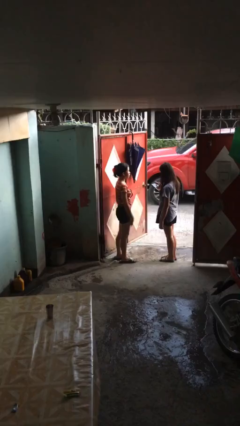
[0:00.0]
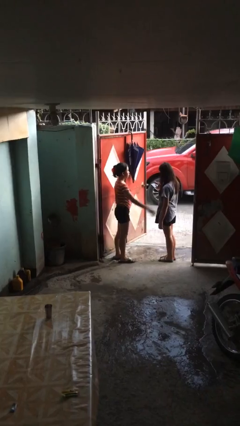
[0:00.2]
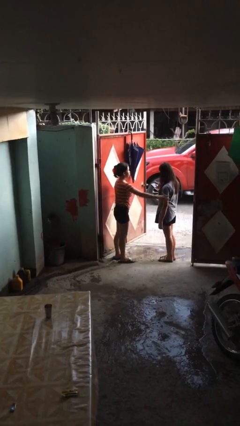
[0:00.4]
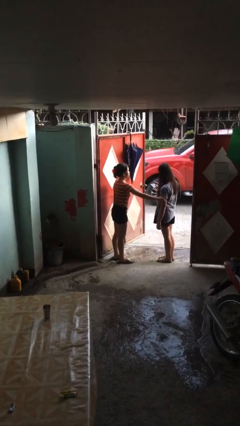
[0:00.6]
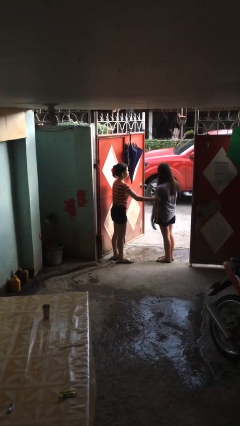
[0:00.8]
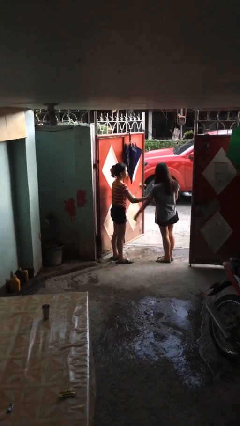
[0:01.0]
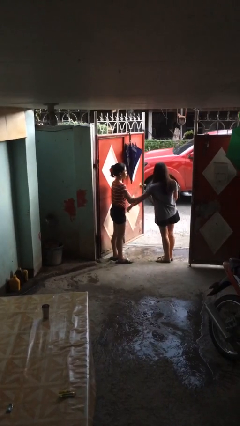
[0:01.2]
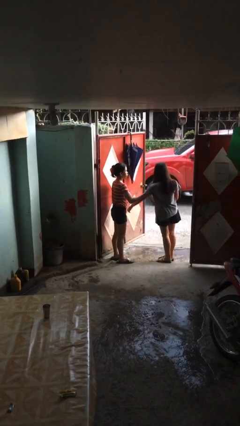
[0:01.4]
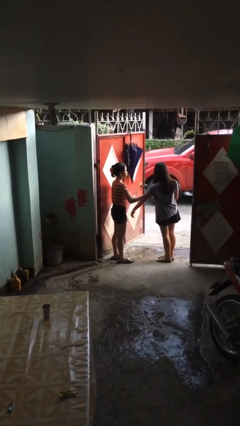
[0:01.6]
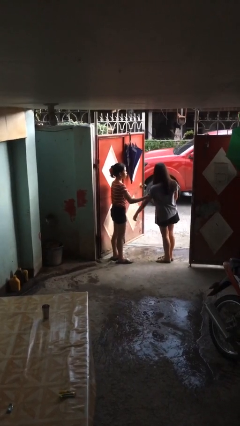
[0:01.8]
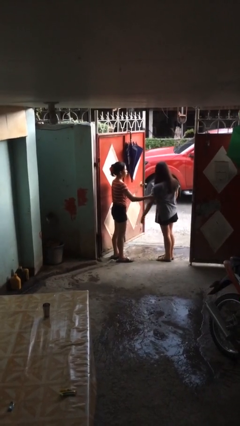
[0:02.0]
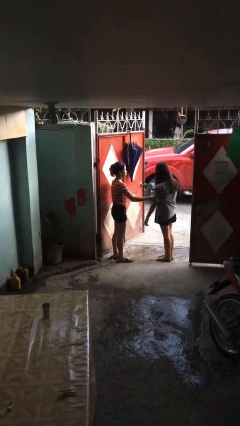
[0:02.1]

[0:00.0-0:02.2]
person grabs person by bicep

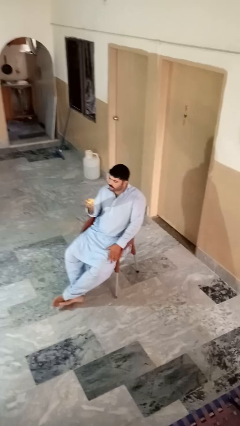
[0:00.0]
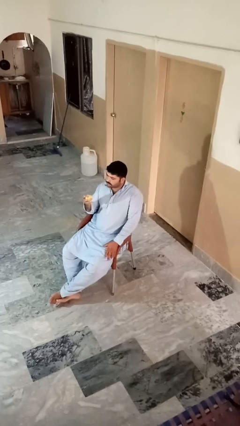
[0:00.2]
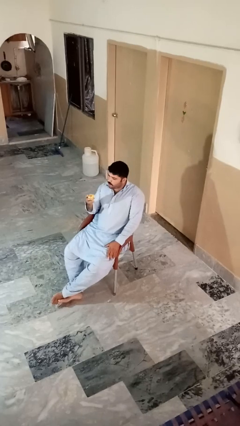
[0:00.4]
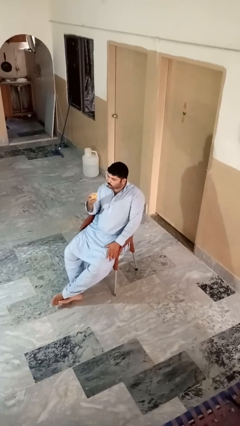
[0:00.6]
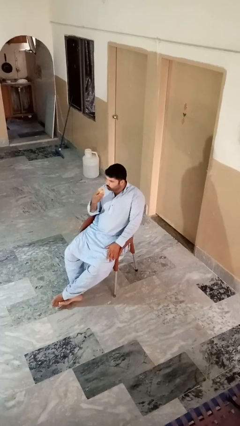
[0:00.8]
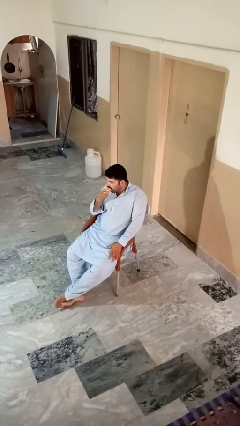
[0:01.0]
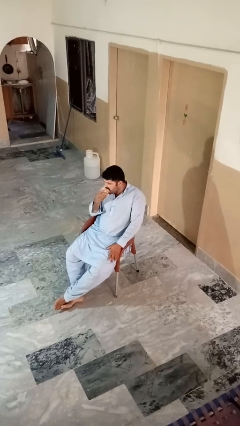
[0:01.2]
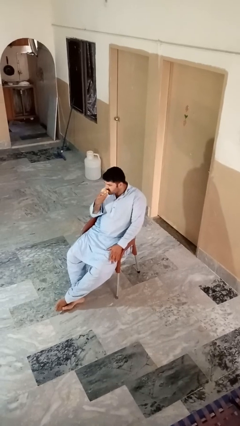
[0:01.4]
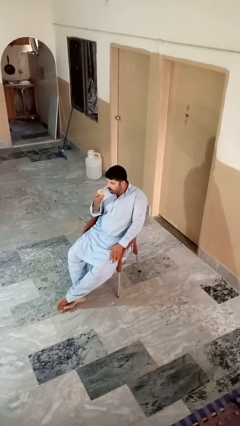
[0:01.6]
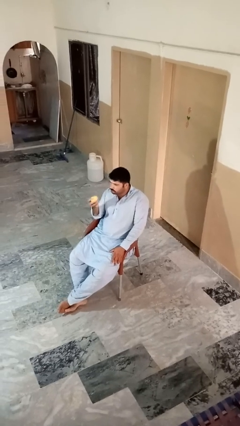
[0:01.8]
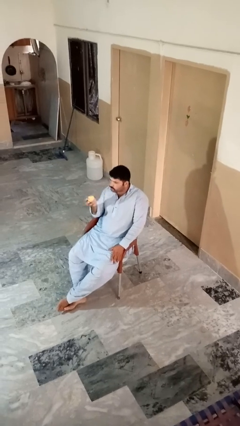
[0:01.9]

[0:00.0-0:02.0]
person eats apple

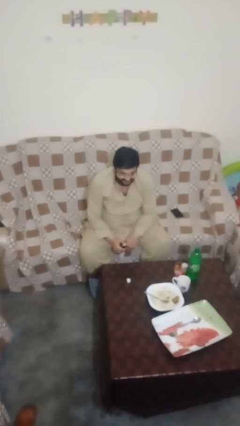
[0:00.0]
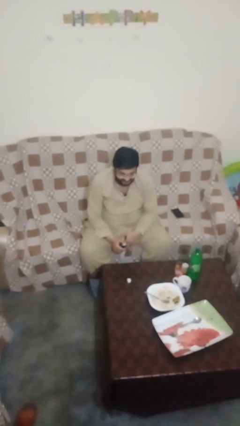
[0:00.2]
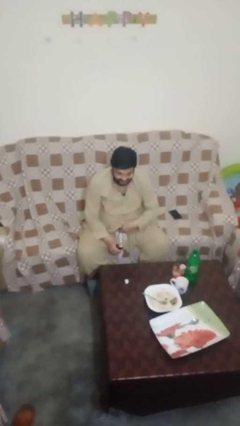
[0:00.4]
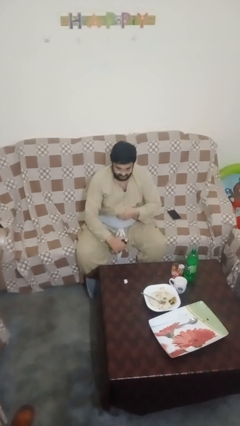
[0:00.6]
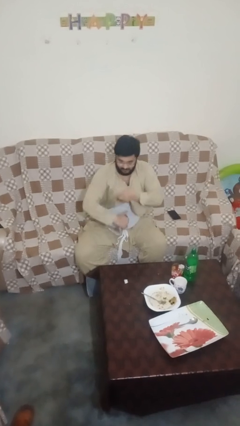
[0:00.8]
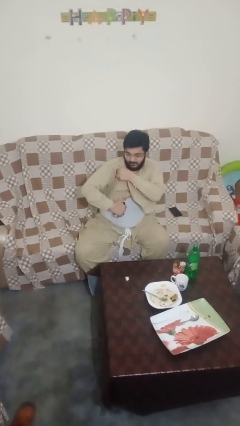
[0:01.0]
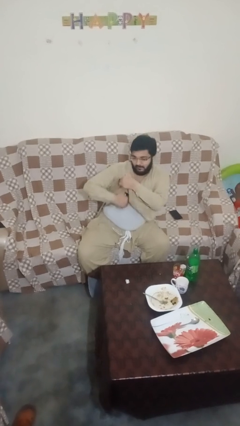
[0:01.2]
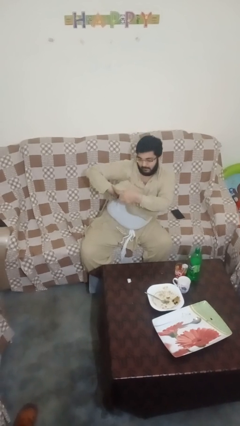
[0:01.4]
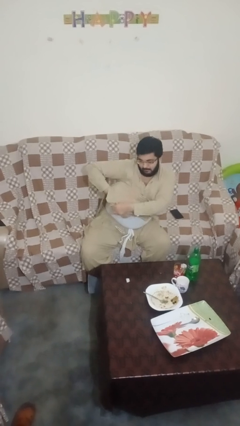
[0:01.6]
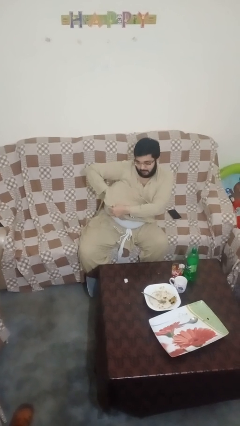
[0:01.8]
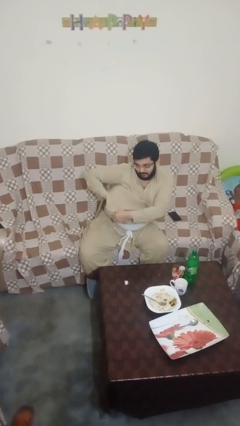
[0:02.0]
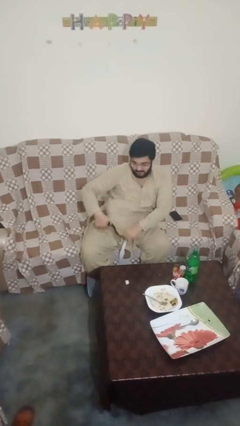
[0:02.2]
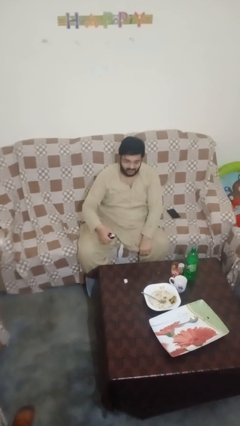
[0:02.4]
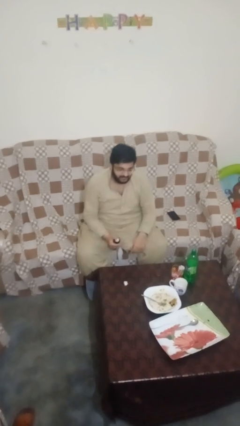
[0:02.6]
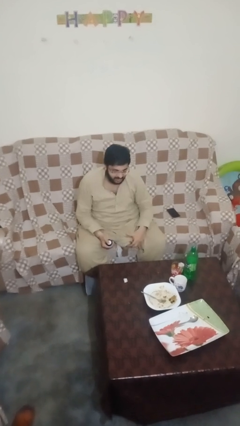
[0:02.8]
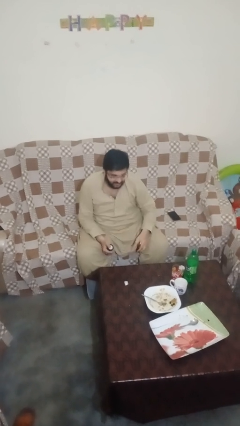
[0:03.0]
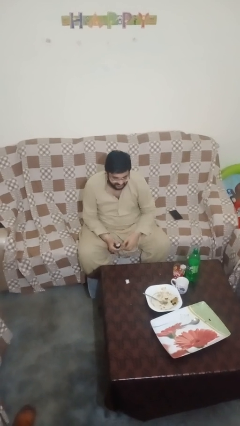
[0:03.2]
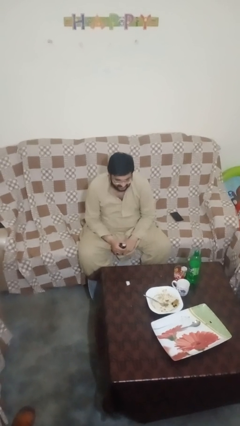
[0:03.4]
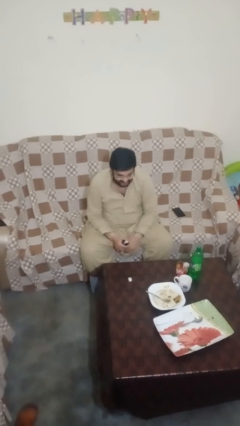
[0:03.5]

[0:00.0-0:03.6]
person applies deodorant

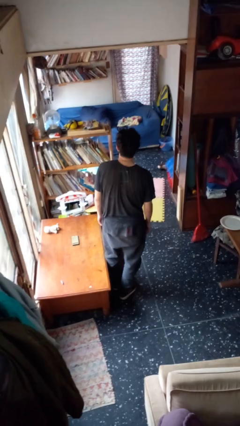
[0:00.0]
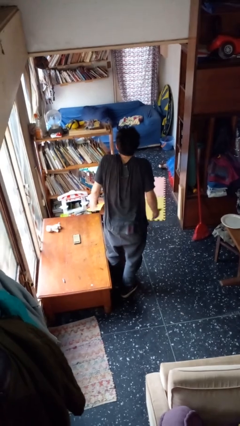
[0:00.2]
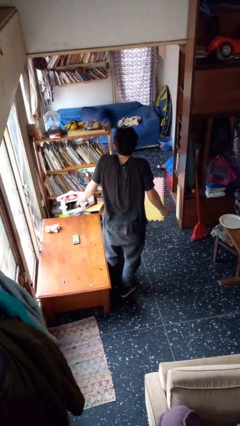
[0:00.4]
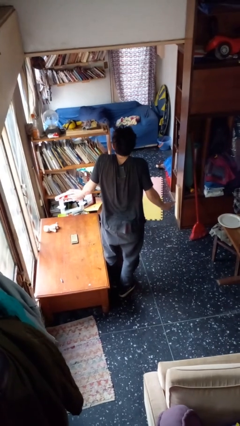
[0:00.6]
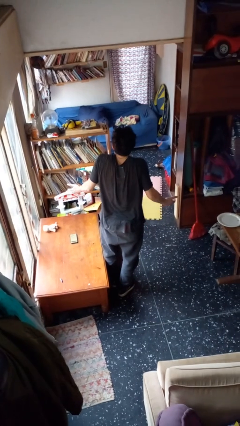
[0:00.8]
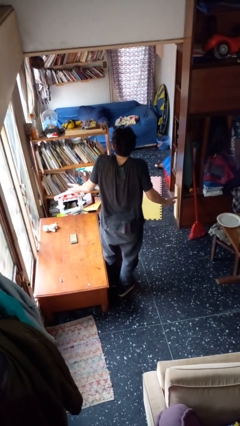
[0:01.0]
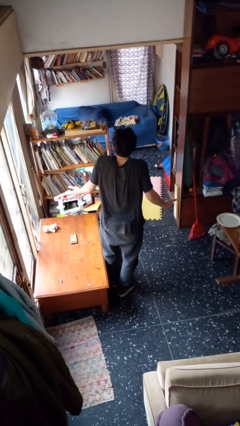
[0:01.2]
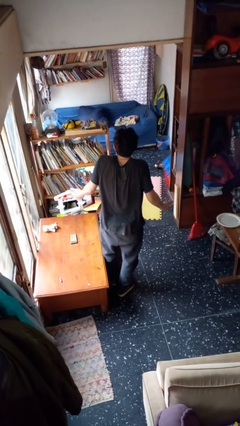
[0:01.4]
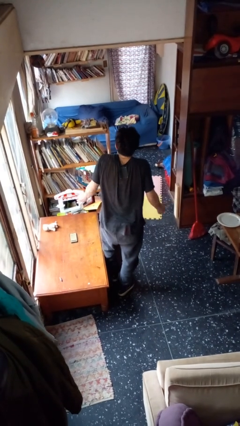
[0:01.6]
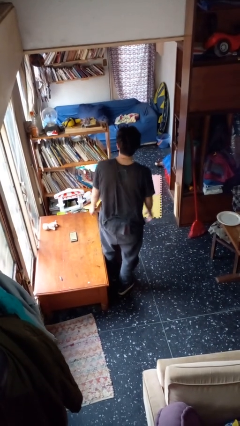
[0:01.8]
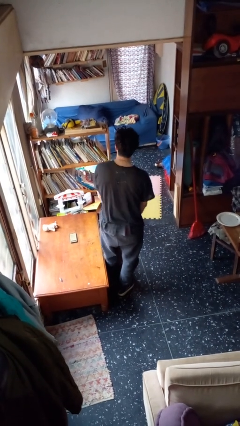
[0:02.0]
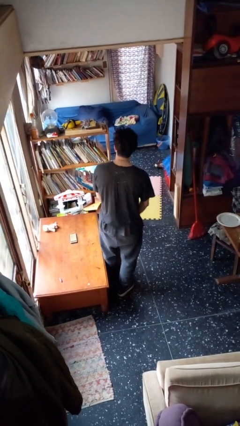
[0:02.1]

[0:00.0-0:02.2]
person shrugs

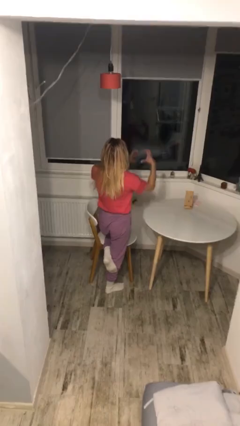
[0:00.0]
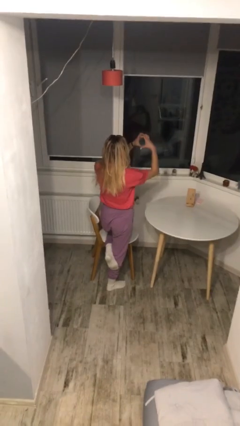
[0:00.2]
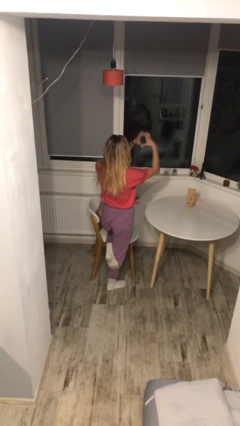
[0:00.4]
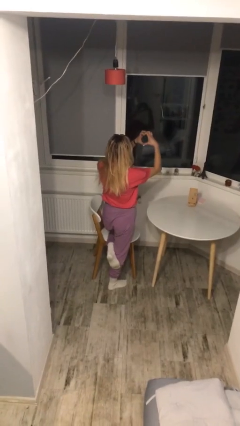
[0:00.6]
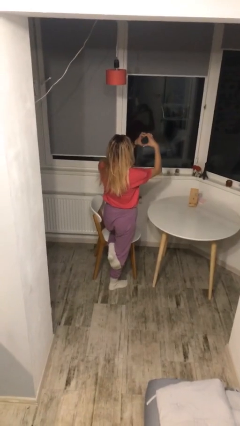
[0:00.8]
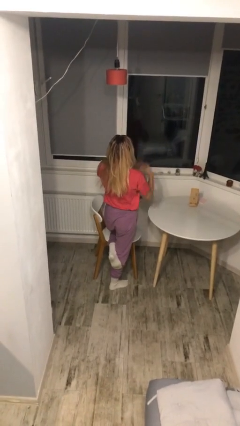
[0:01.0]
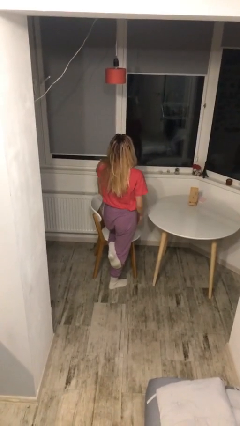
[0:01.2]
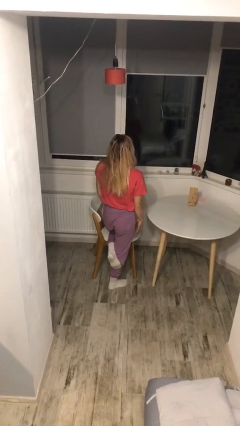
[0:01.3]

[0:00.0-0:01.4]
person gestures heart

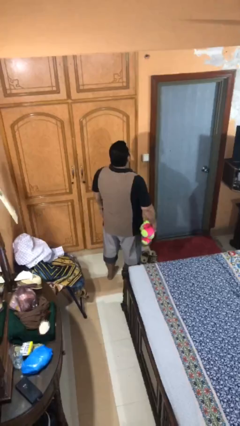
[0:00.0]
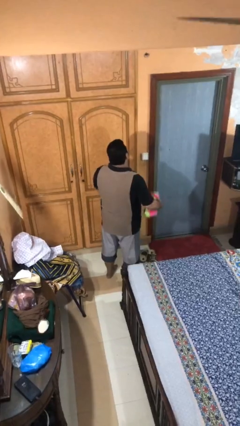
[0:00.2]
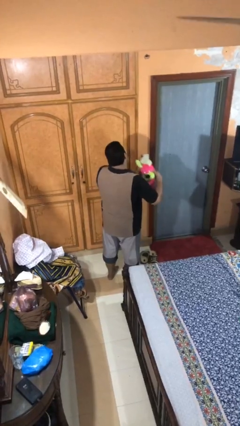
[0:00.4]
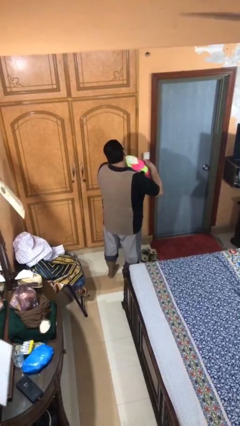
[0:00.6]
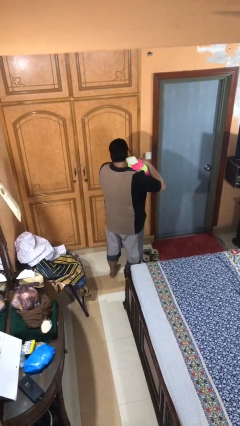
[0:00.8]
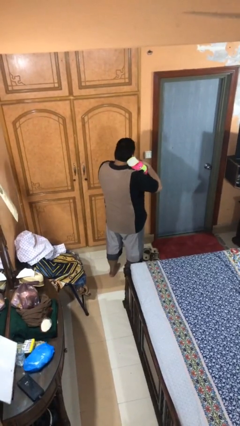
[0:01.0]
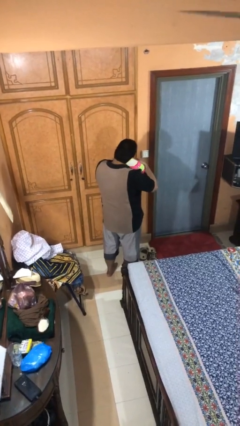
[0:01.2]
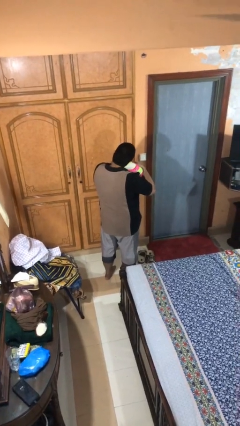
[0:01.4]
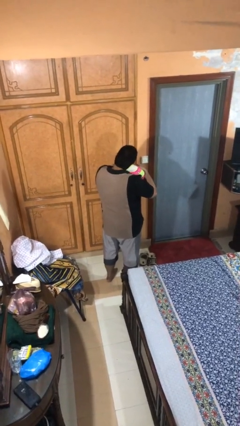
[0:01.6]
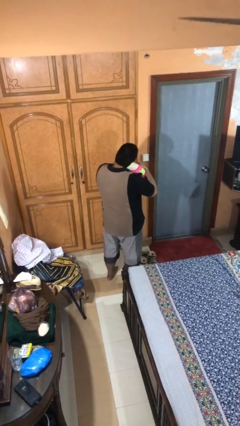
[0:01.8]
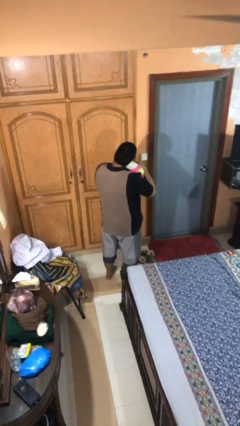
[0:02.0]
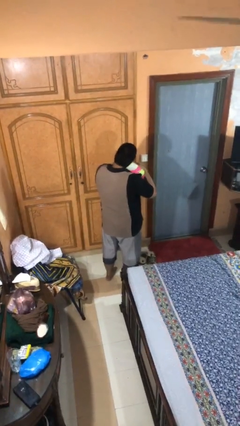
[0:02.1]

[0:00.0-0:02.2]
person hugs stuffed animal

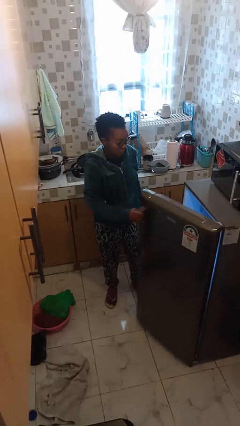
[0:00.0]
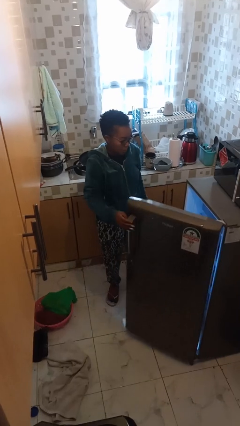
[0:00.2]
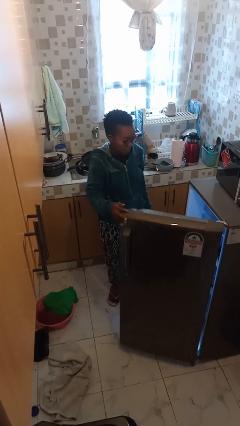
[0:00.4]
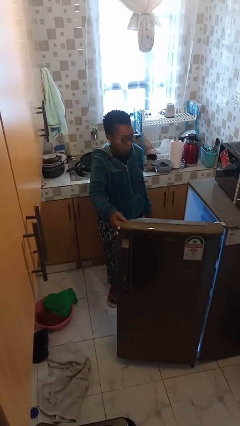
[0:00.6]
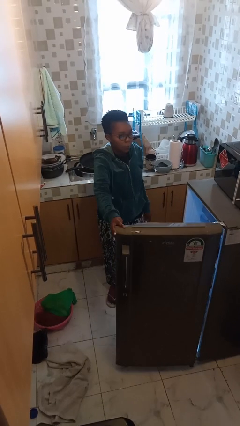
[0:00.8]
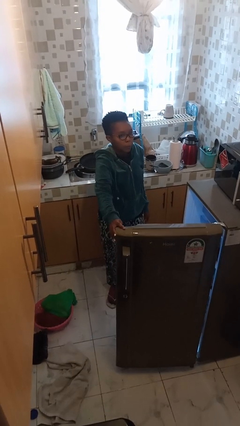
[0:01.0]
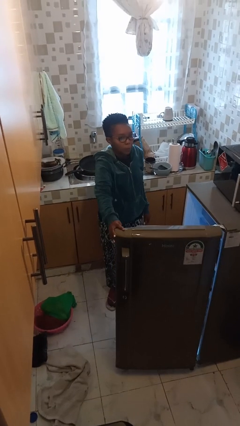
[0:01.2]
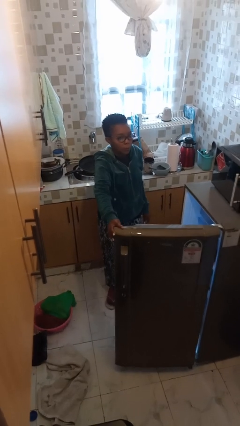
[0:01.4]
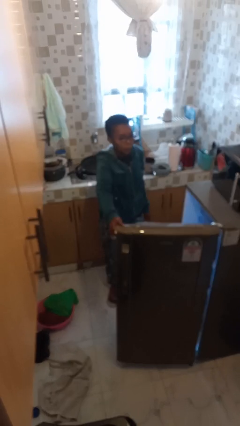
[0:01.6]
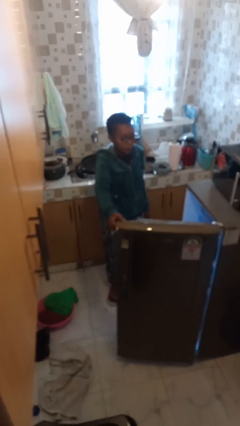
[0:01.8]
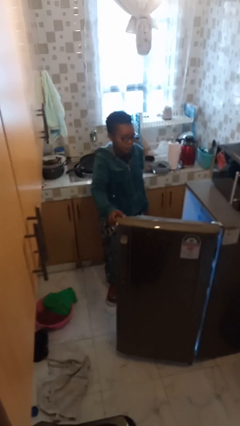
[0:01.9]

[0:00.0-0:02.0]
person opens refrigerator

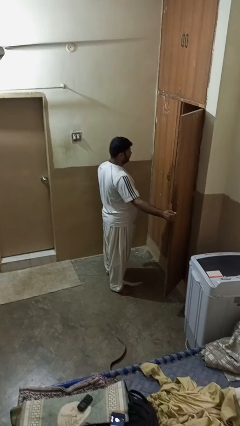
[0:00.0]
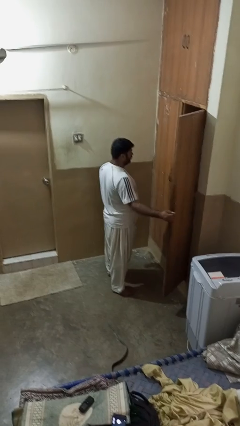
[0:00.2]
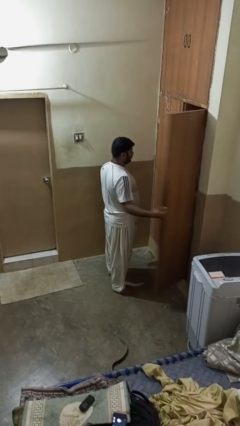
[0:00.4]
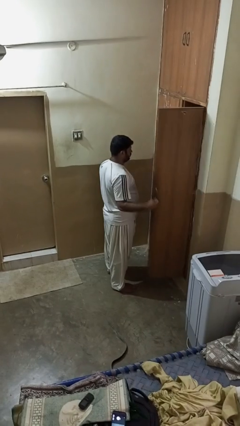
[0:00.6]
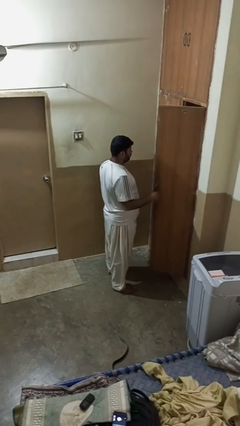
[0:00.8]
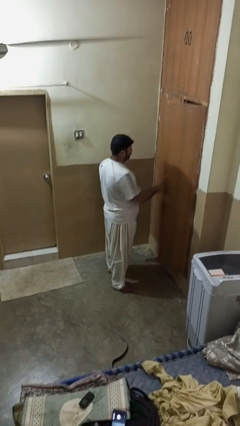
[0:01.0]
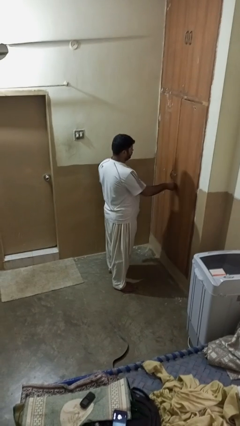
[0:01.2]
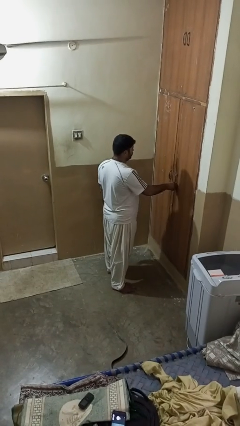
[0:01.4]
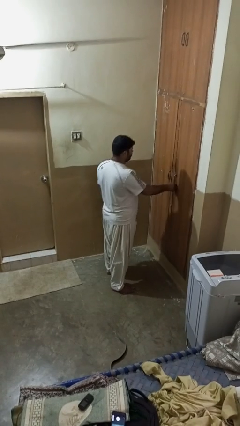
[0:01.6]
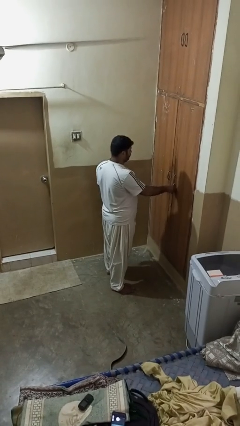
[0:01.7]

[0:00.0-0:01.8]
person closes closet door
